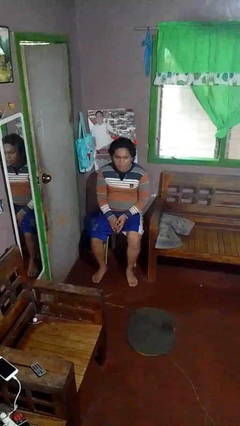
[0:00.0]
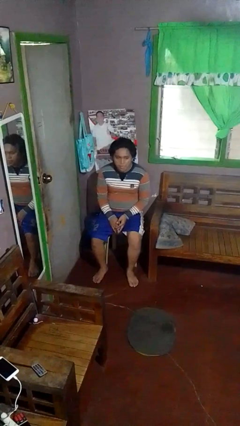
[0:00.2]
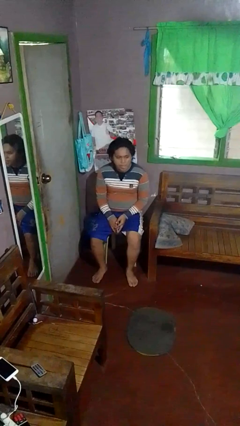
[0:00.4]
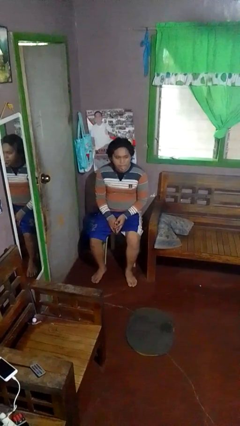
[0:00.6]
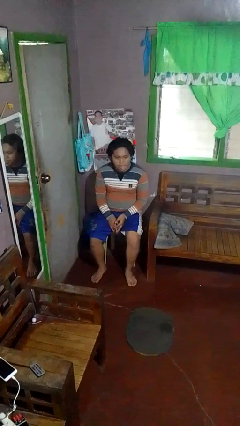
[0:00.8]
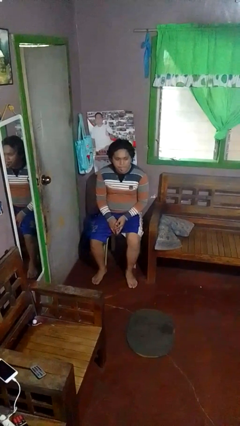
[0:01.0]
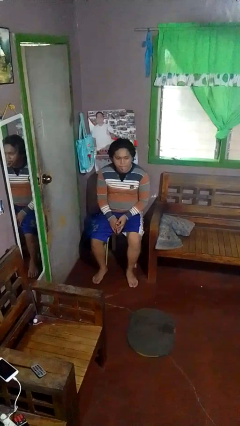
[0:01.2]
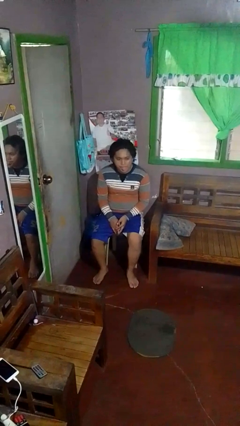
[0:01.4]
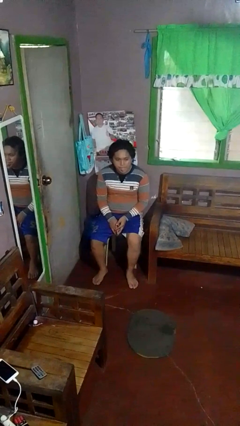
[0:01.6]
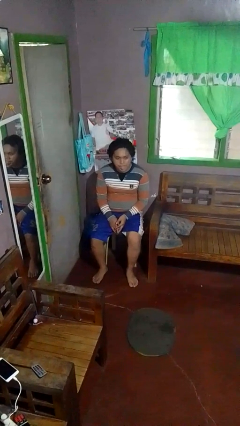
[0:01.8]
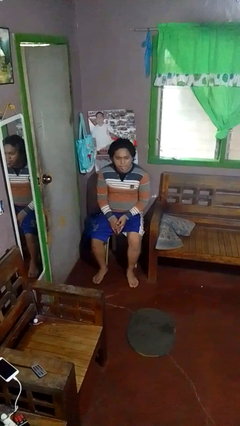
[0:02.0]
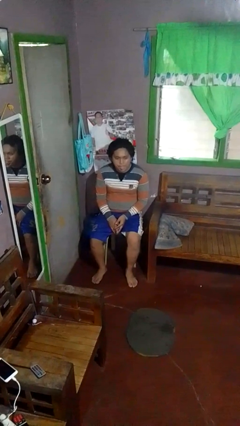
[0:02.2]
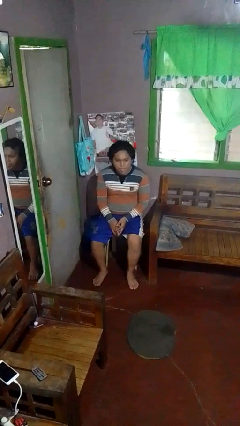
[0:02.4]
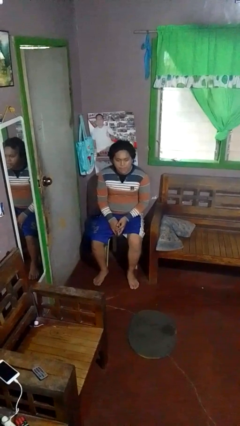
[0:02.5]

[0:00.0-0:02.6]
person sticks out tongue

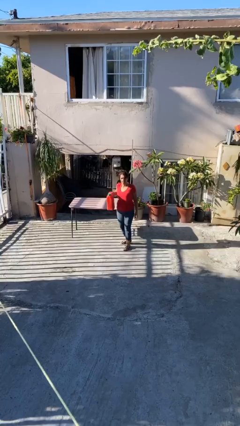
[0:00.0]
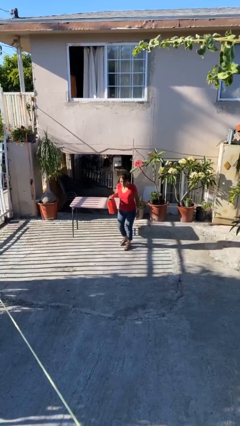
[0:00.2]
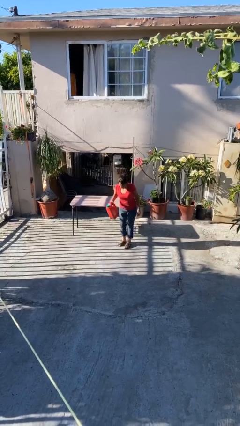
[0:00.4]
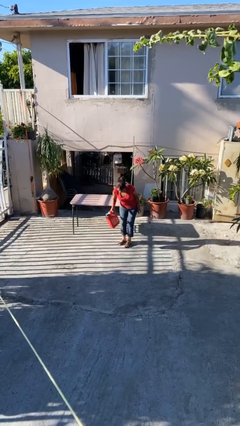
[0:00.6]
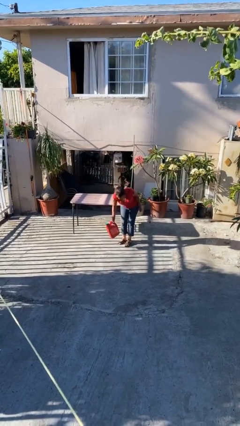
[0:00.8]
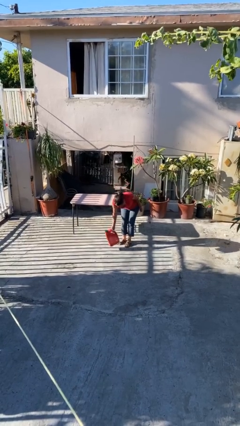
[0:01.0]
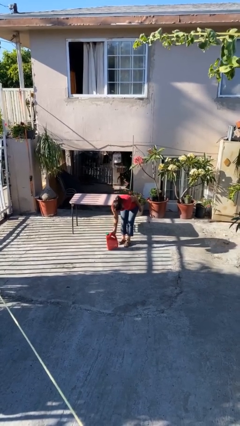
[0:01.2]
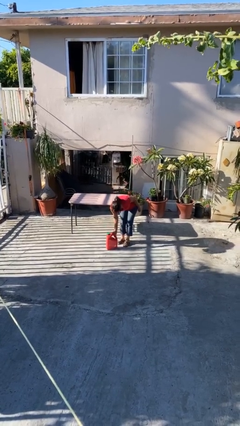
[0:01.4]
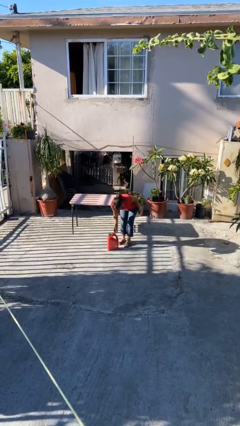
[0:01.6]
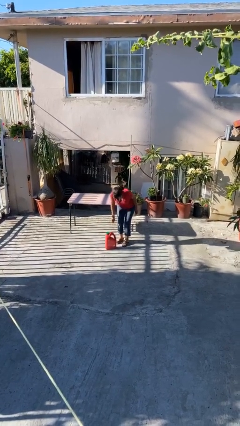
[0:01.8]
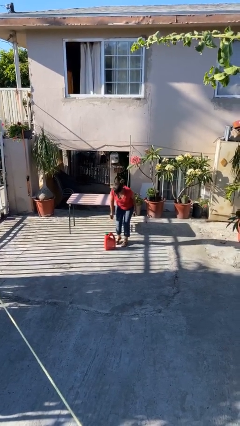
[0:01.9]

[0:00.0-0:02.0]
person puts down object on floor

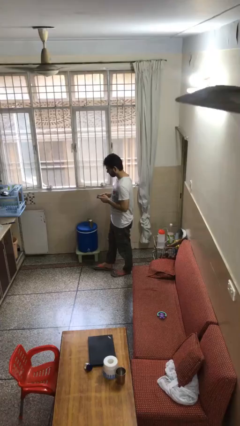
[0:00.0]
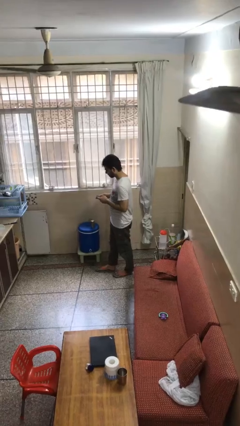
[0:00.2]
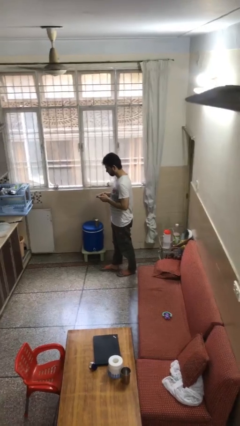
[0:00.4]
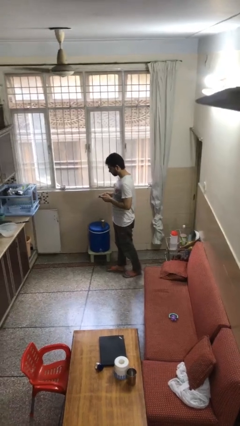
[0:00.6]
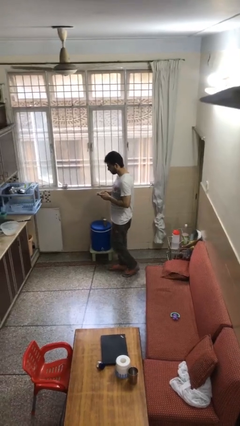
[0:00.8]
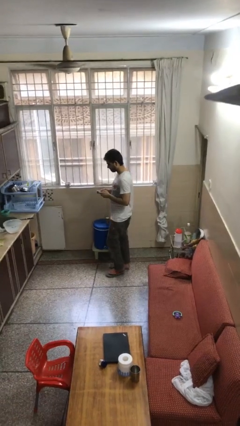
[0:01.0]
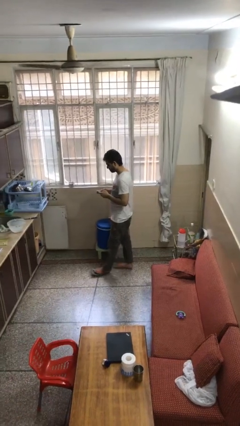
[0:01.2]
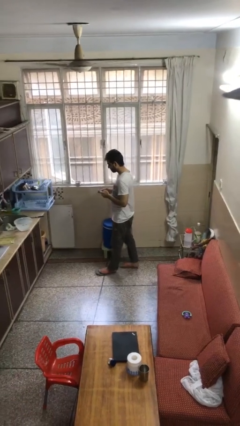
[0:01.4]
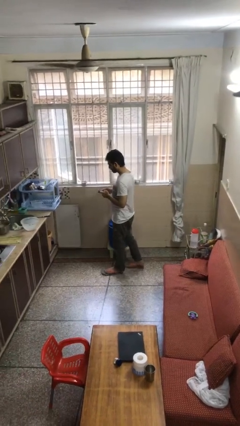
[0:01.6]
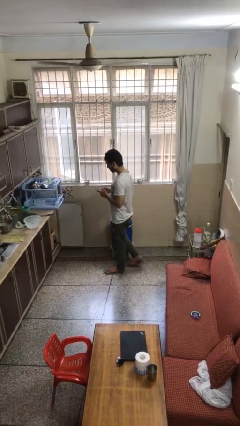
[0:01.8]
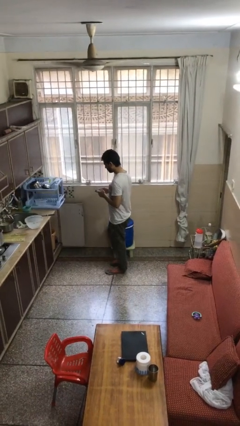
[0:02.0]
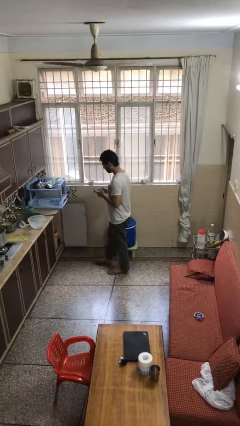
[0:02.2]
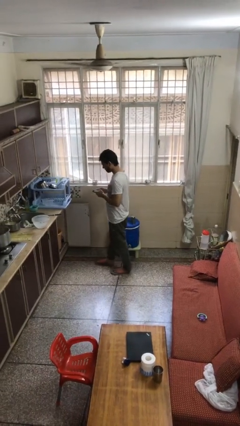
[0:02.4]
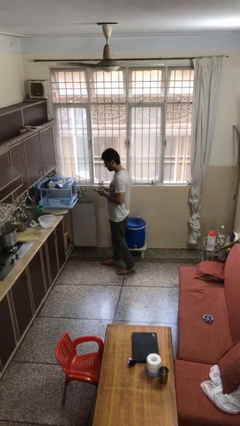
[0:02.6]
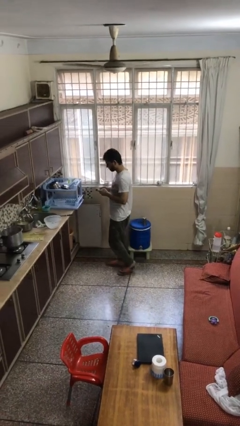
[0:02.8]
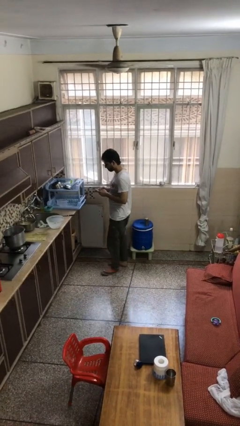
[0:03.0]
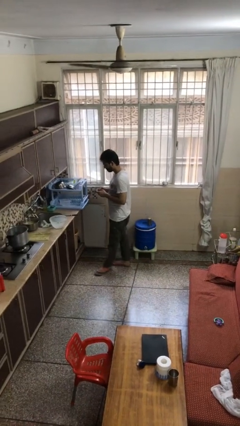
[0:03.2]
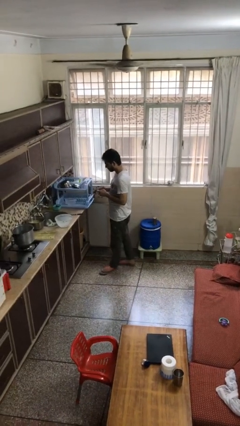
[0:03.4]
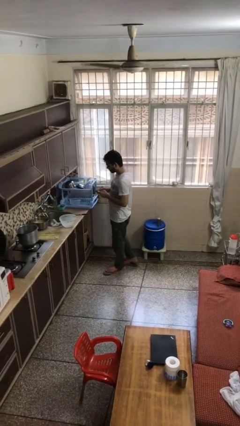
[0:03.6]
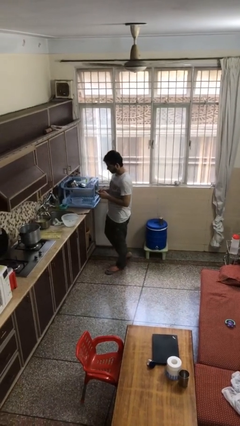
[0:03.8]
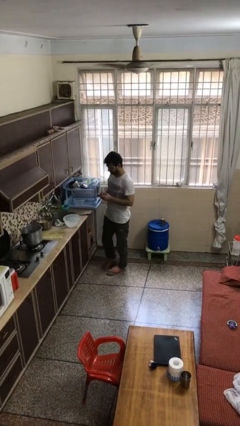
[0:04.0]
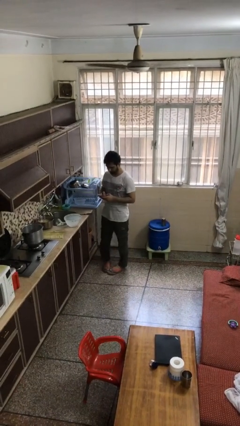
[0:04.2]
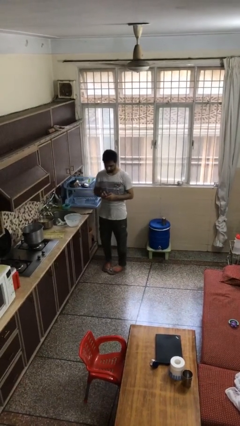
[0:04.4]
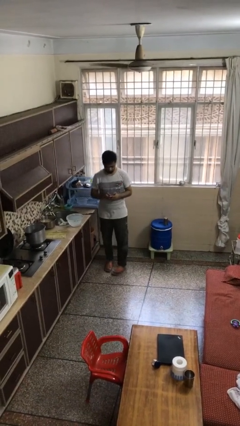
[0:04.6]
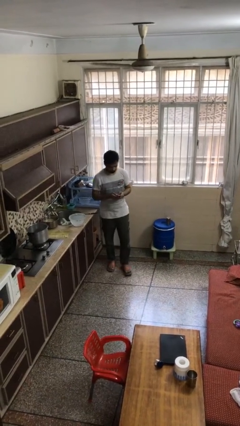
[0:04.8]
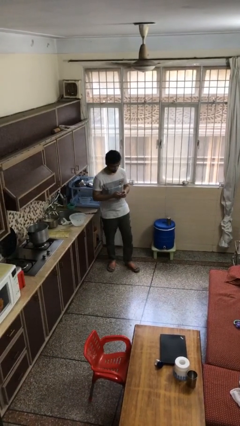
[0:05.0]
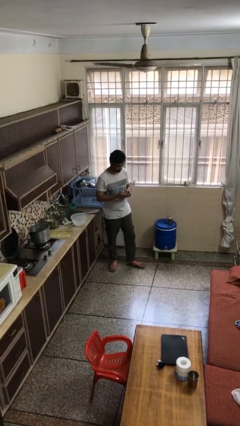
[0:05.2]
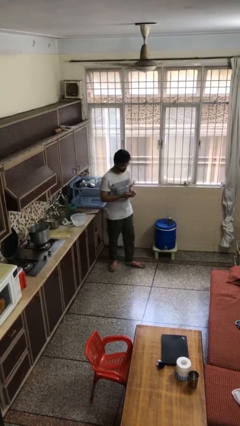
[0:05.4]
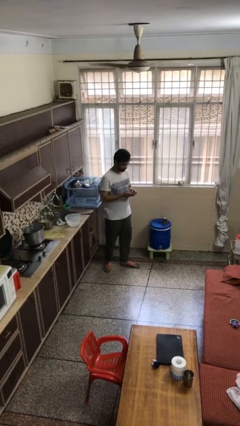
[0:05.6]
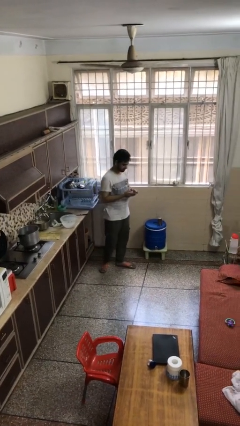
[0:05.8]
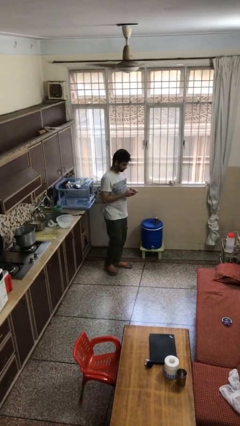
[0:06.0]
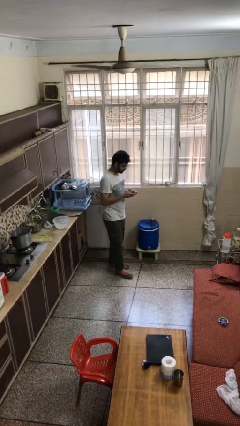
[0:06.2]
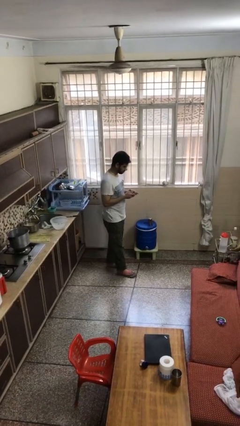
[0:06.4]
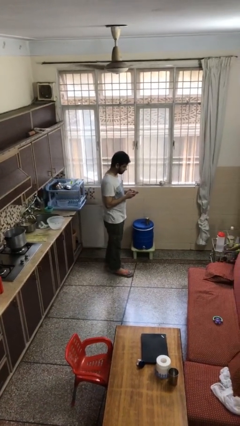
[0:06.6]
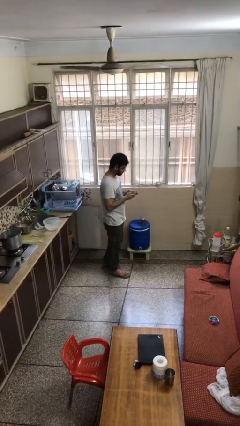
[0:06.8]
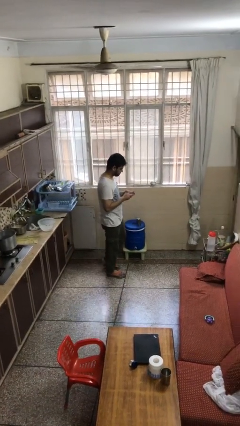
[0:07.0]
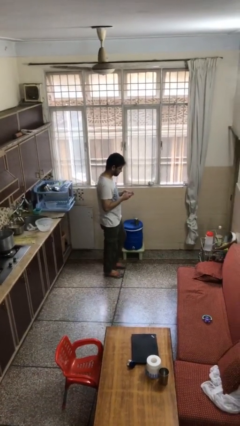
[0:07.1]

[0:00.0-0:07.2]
person texts on phone

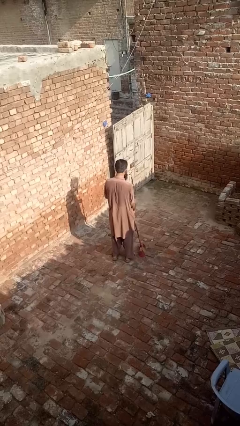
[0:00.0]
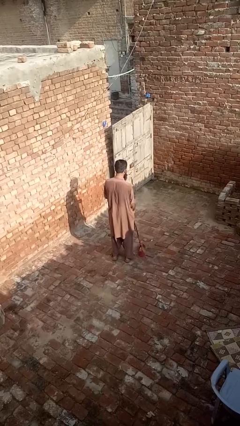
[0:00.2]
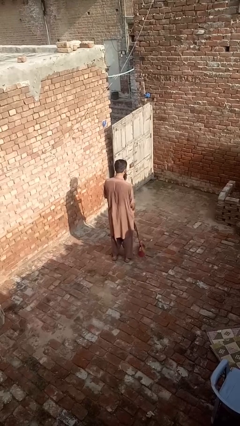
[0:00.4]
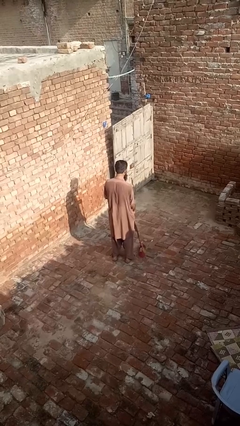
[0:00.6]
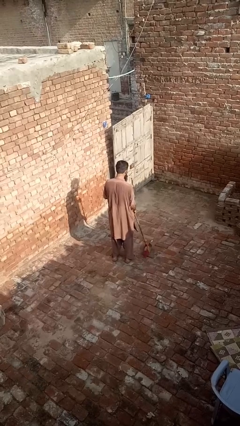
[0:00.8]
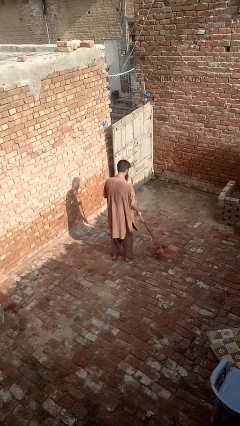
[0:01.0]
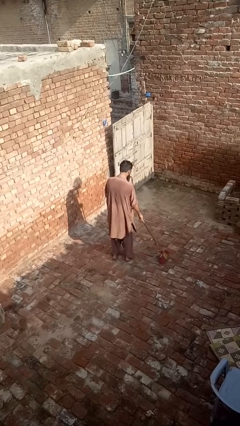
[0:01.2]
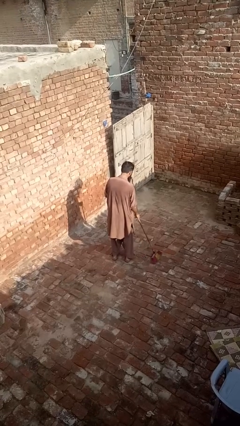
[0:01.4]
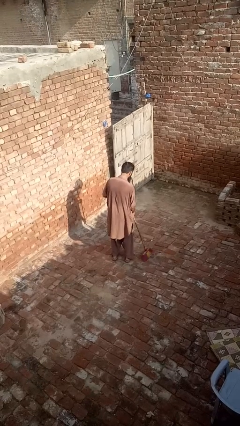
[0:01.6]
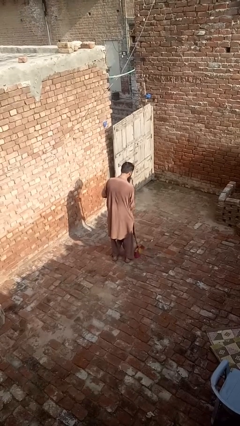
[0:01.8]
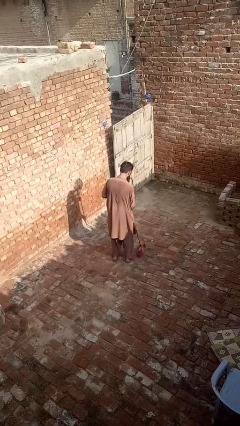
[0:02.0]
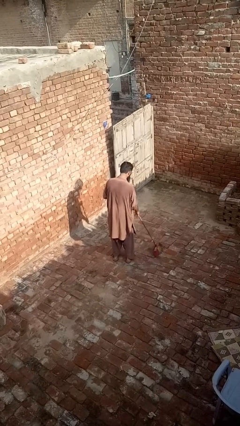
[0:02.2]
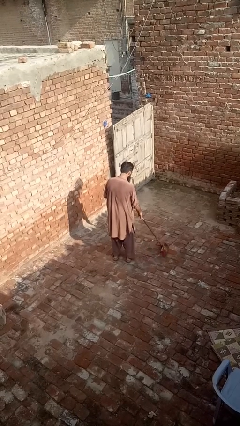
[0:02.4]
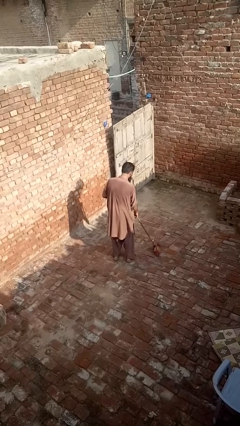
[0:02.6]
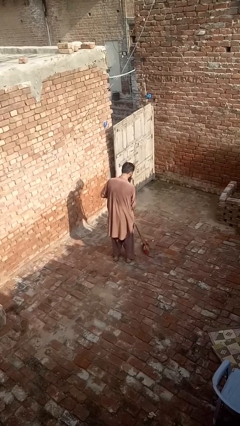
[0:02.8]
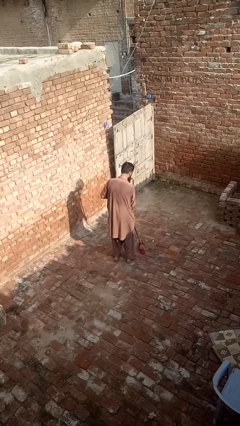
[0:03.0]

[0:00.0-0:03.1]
person sweeps floor

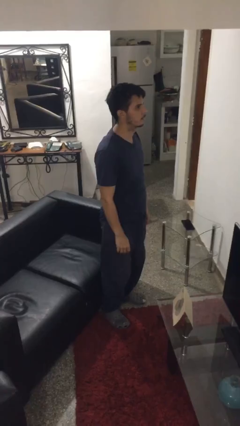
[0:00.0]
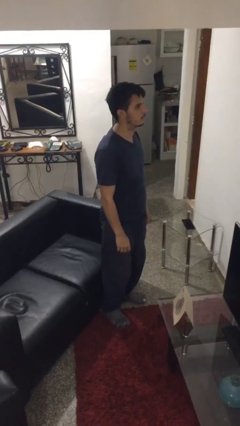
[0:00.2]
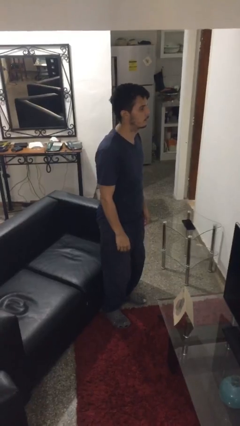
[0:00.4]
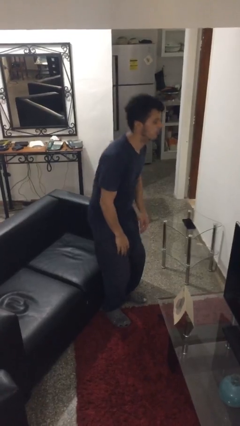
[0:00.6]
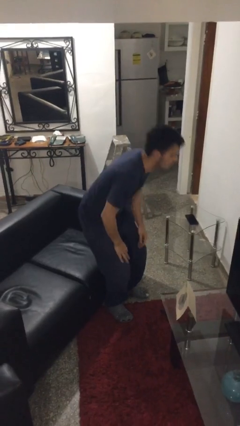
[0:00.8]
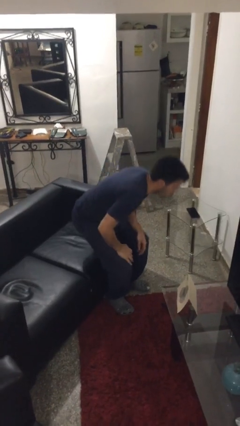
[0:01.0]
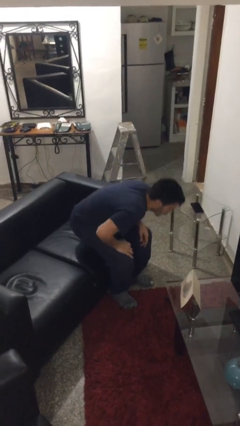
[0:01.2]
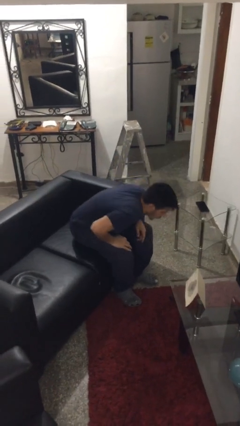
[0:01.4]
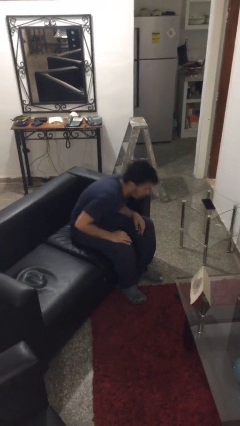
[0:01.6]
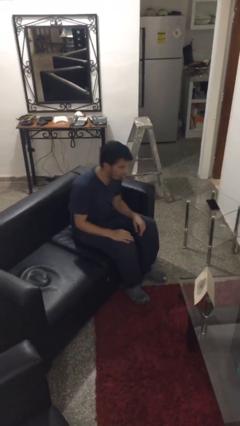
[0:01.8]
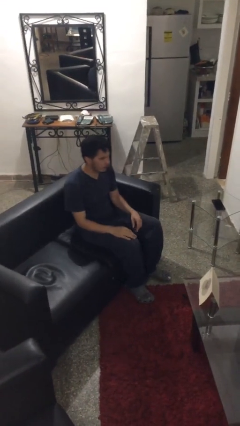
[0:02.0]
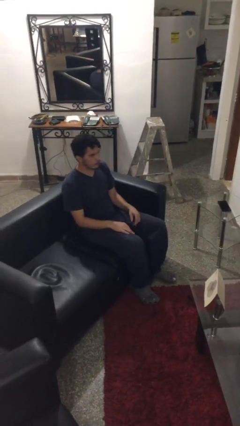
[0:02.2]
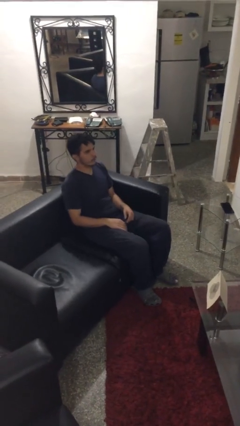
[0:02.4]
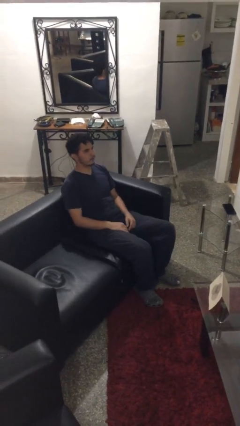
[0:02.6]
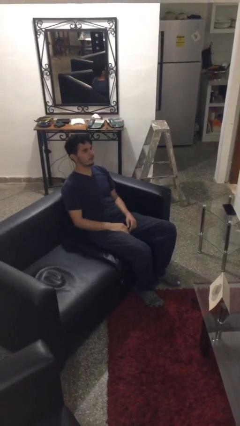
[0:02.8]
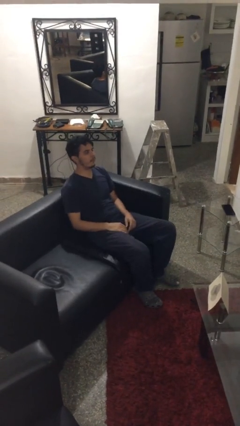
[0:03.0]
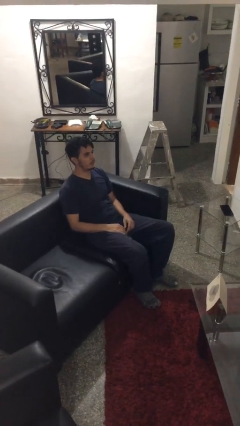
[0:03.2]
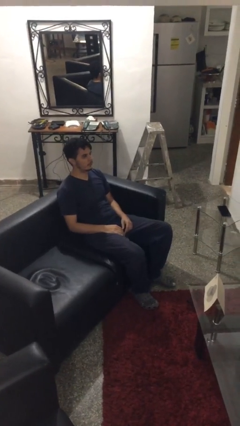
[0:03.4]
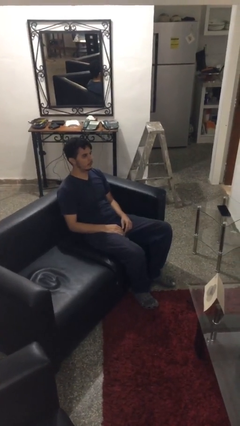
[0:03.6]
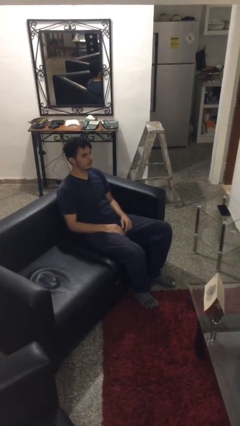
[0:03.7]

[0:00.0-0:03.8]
person lies down on couch
